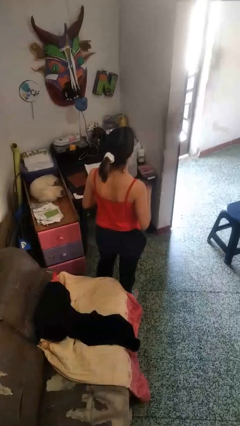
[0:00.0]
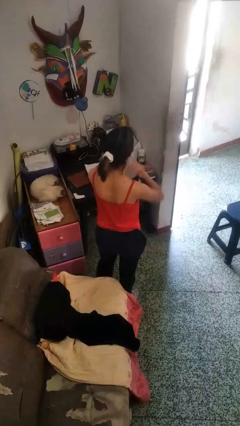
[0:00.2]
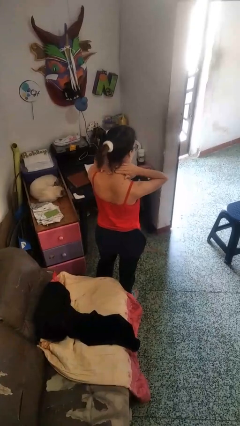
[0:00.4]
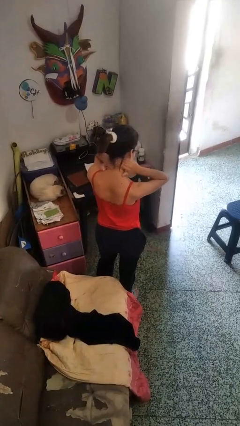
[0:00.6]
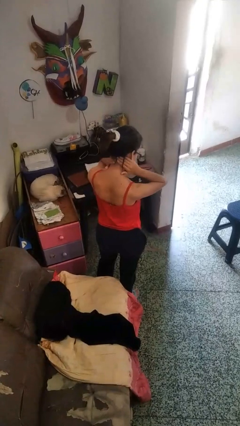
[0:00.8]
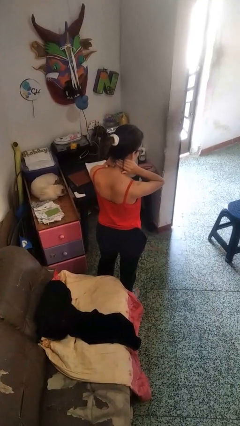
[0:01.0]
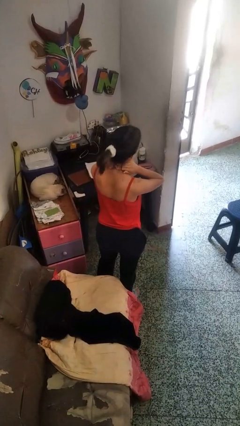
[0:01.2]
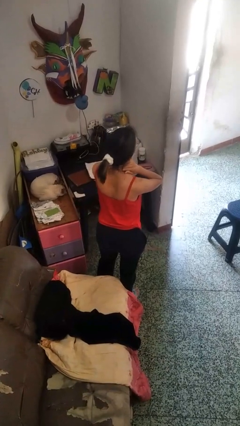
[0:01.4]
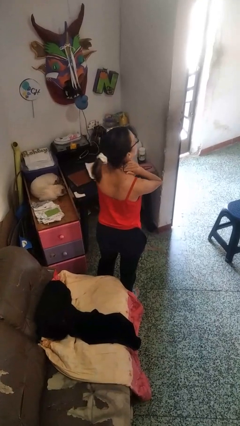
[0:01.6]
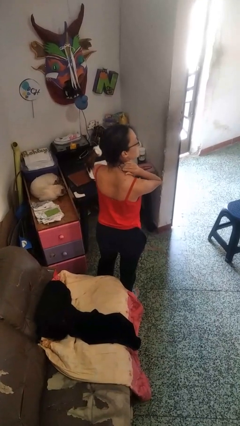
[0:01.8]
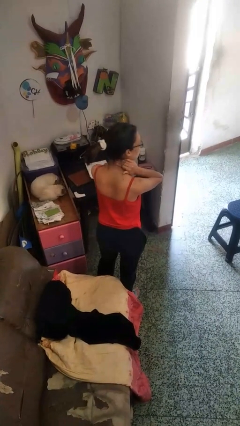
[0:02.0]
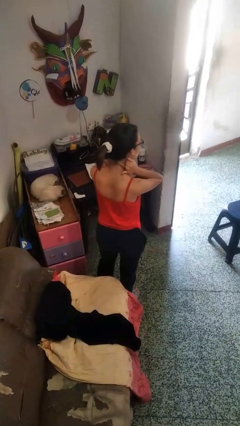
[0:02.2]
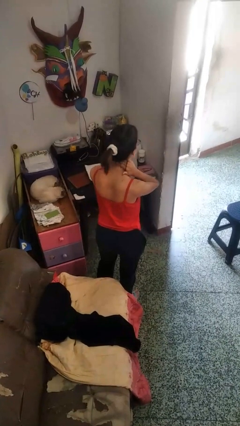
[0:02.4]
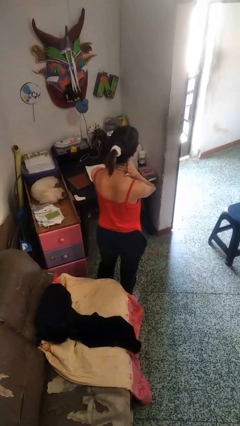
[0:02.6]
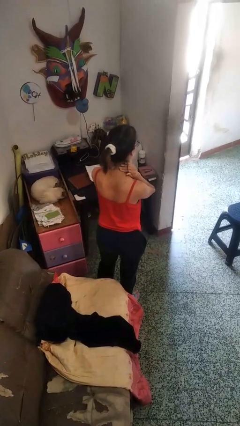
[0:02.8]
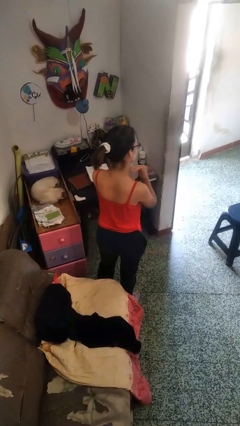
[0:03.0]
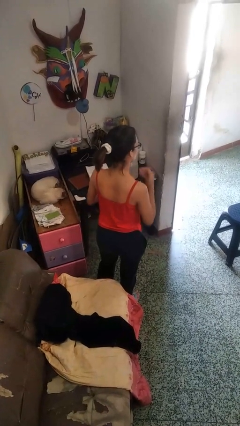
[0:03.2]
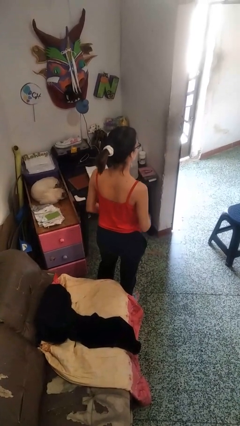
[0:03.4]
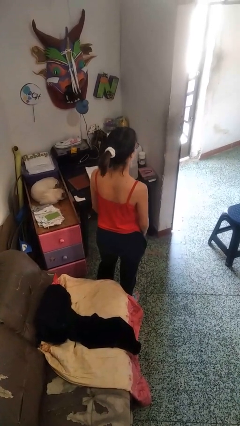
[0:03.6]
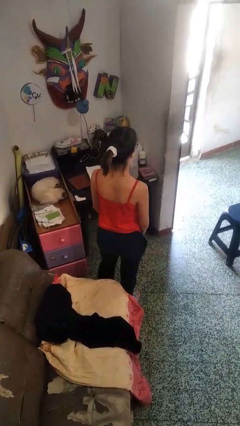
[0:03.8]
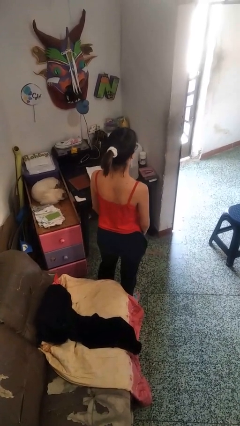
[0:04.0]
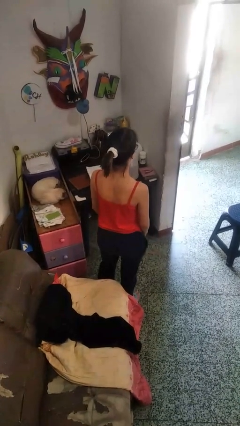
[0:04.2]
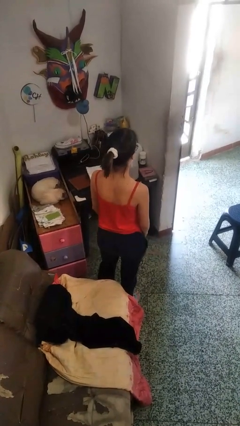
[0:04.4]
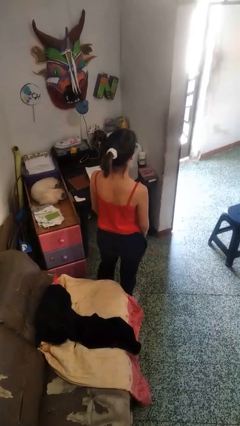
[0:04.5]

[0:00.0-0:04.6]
person rubs neck

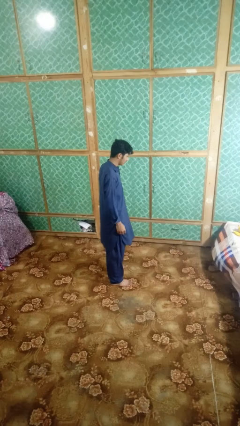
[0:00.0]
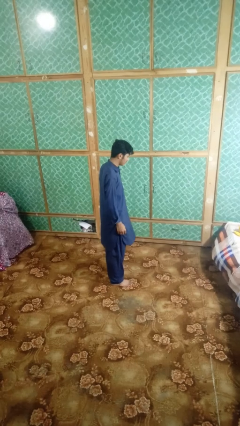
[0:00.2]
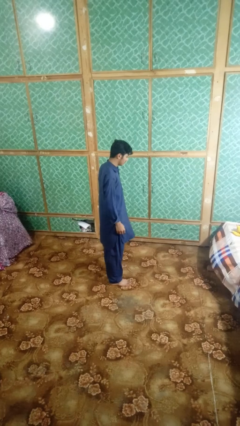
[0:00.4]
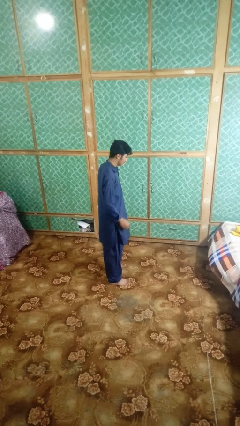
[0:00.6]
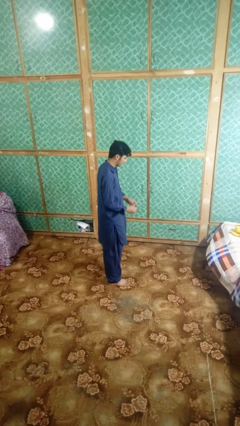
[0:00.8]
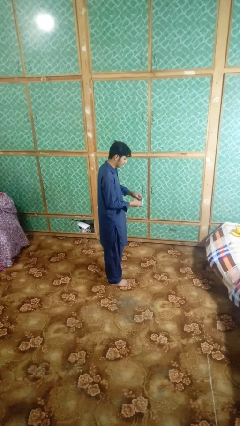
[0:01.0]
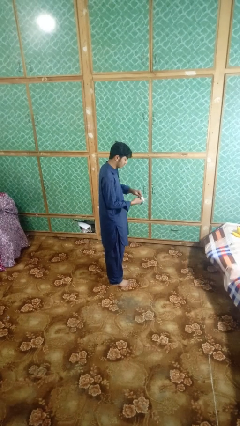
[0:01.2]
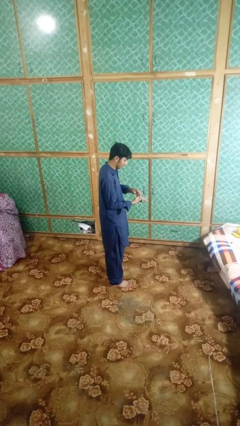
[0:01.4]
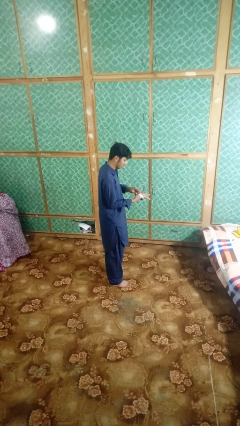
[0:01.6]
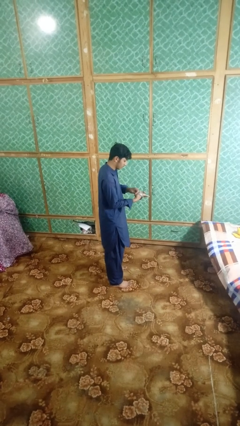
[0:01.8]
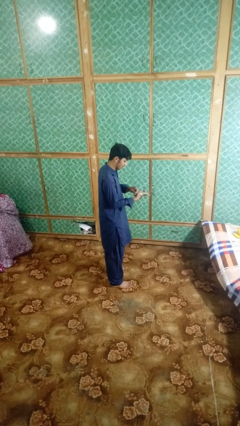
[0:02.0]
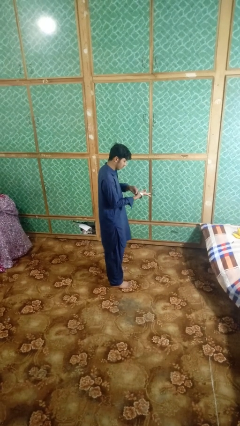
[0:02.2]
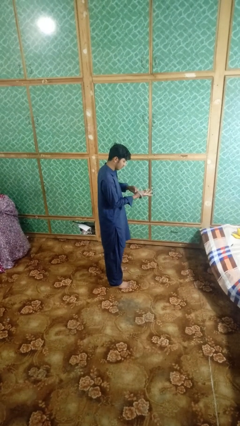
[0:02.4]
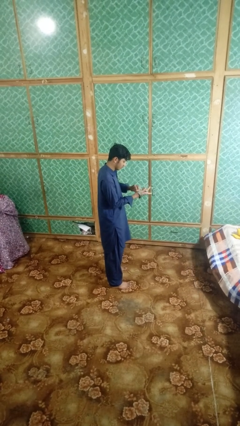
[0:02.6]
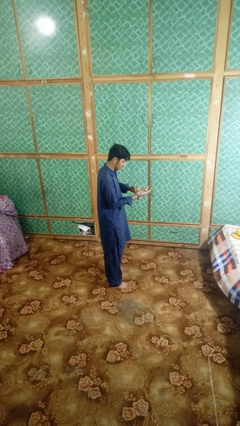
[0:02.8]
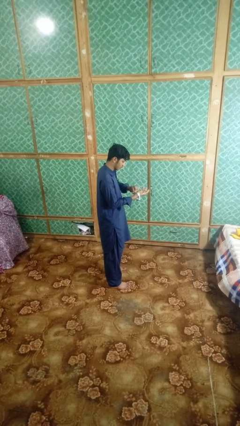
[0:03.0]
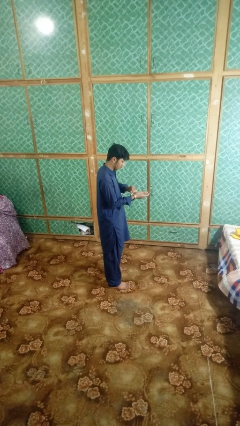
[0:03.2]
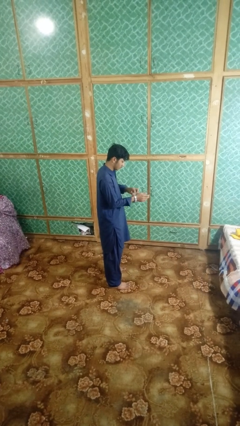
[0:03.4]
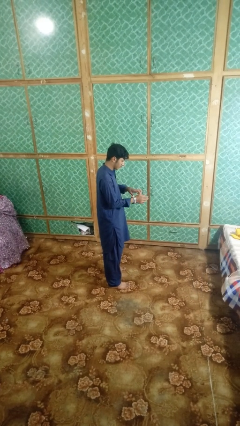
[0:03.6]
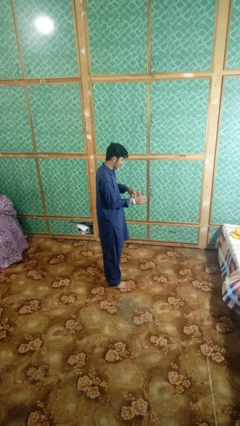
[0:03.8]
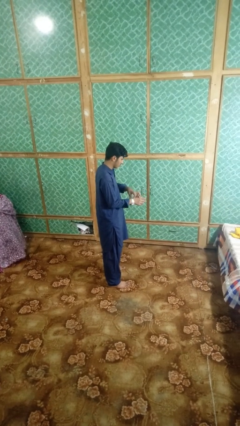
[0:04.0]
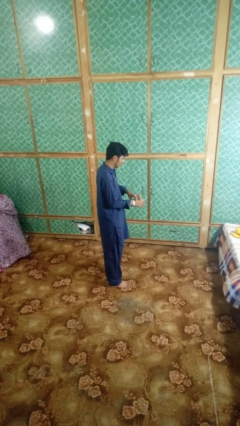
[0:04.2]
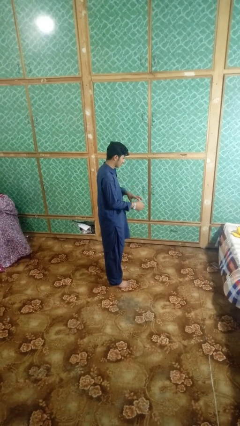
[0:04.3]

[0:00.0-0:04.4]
person puts on wristwatch

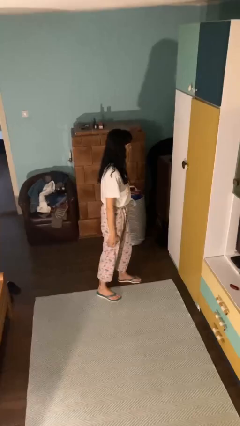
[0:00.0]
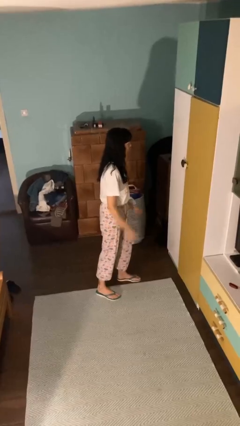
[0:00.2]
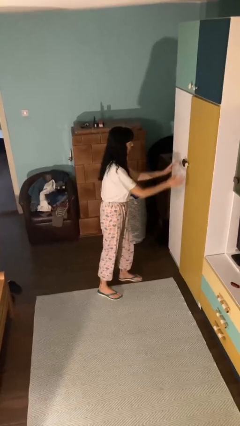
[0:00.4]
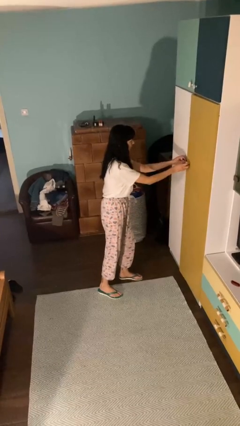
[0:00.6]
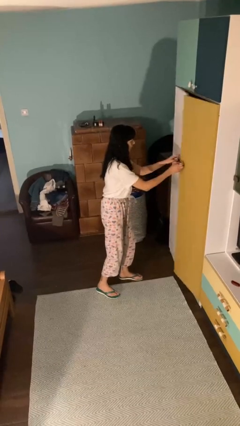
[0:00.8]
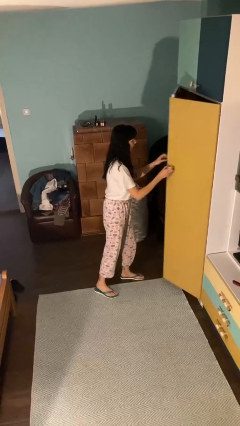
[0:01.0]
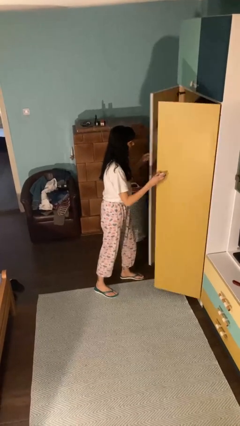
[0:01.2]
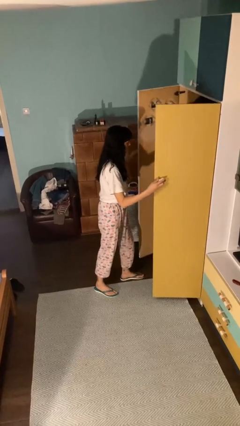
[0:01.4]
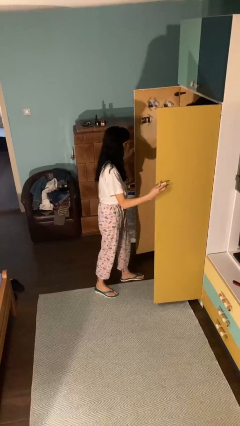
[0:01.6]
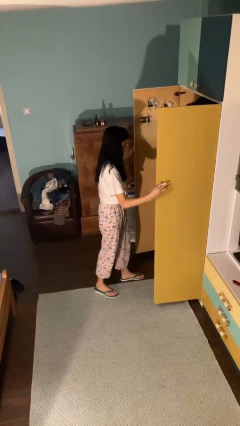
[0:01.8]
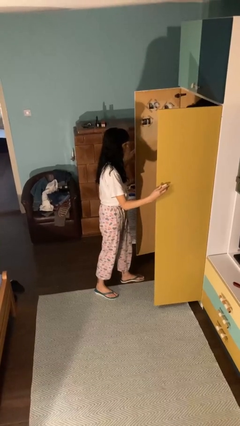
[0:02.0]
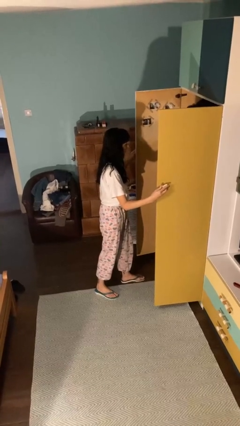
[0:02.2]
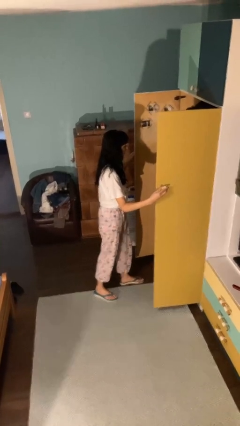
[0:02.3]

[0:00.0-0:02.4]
person opens closet door

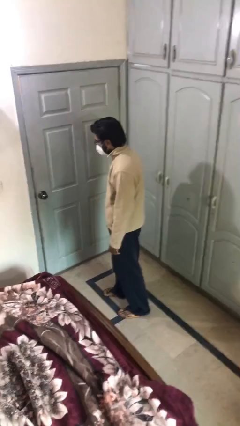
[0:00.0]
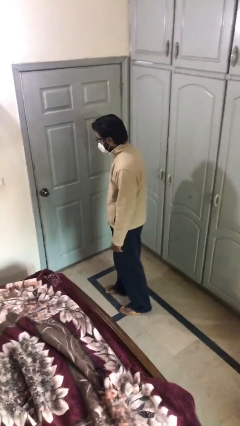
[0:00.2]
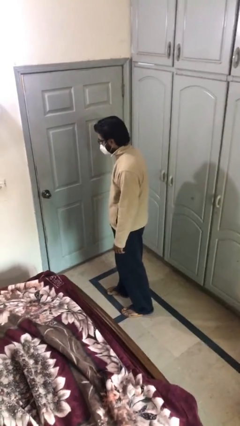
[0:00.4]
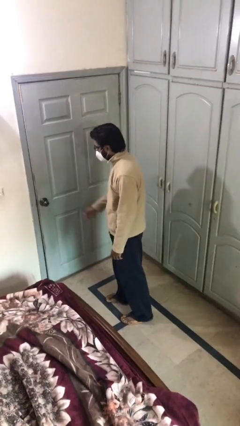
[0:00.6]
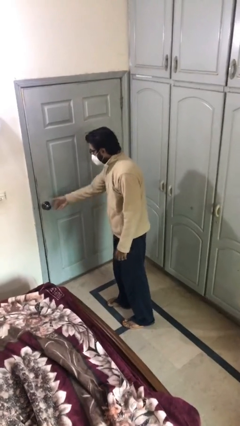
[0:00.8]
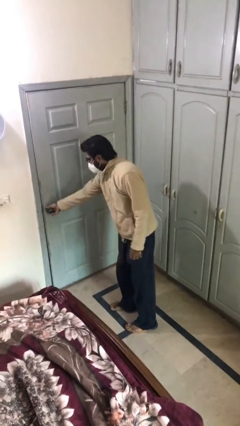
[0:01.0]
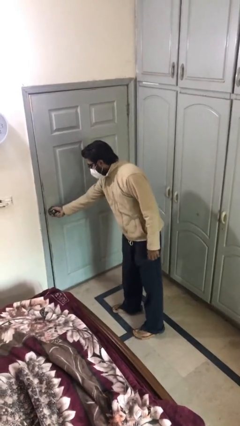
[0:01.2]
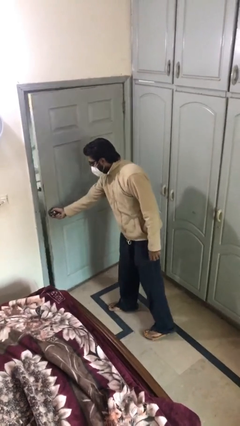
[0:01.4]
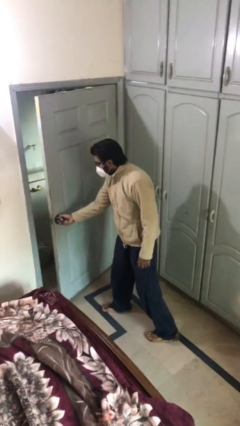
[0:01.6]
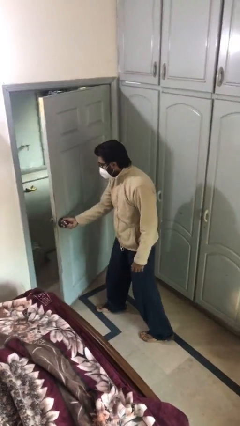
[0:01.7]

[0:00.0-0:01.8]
person opens facility door

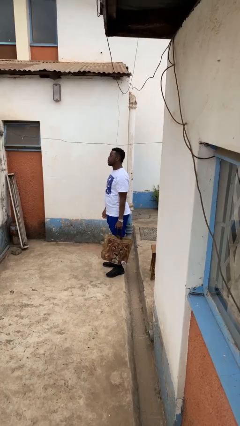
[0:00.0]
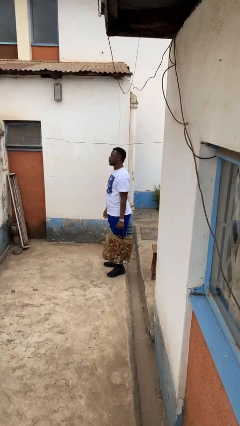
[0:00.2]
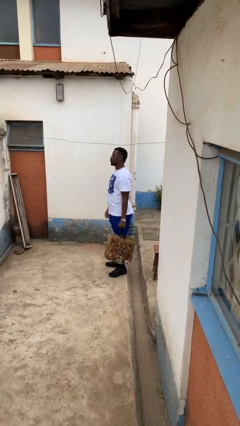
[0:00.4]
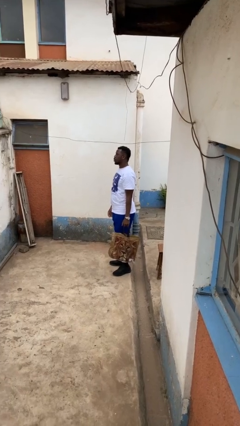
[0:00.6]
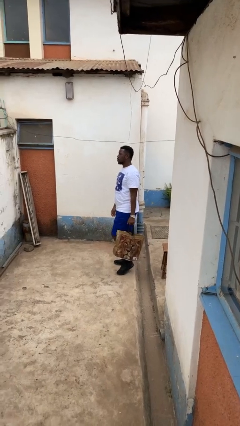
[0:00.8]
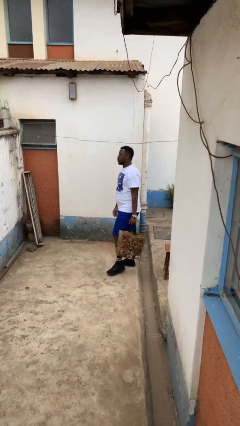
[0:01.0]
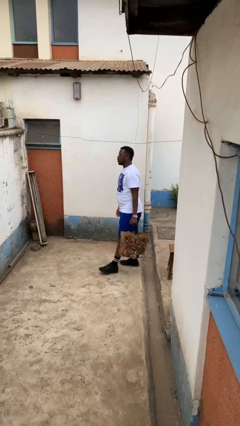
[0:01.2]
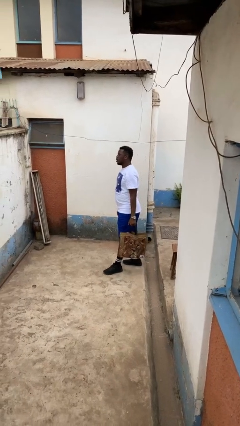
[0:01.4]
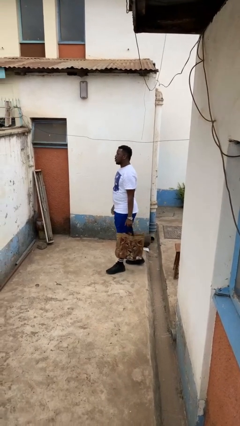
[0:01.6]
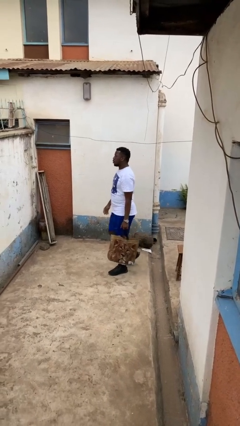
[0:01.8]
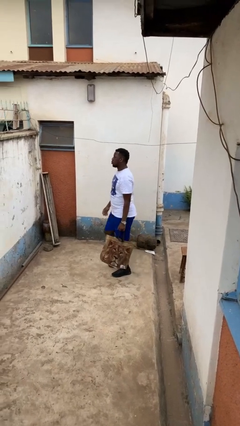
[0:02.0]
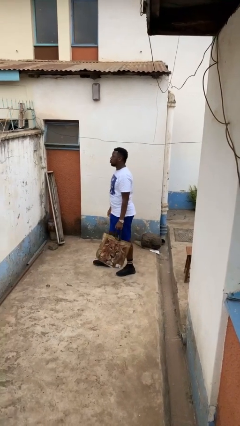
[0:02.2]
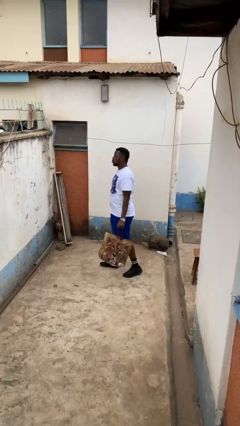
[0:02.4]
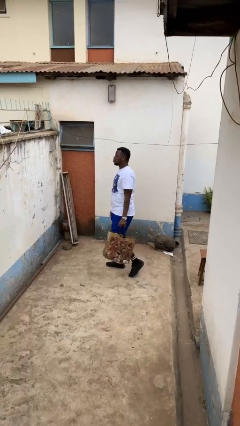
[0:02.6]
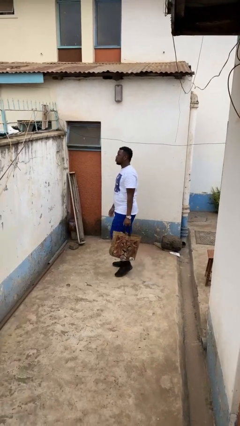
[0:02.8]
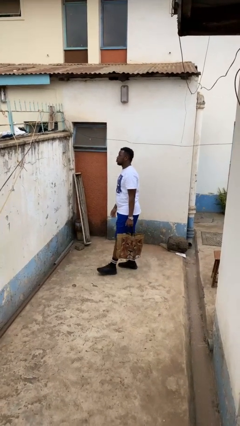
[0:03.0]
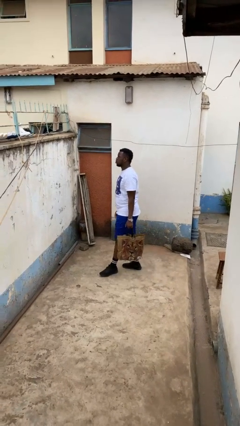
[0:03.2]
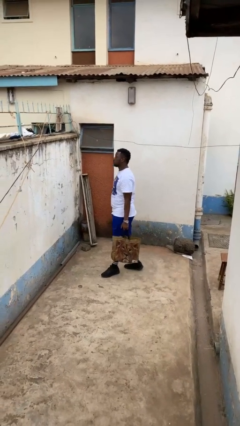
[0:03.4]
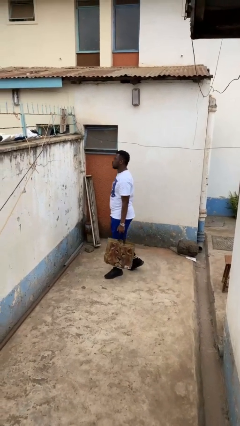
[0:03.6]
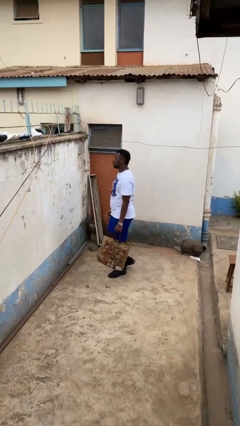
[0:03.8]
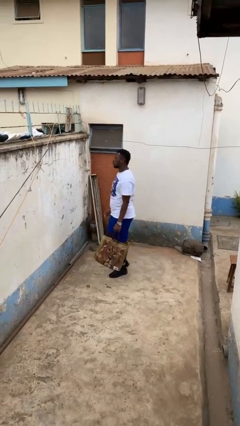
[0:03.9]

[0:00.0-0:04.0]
person carries groceries

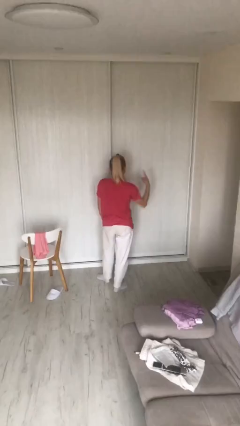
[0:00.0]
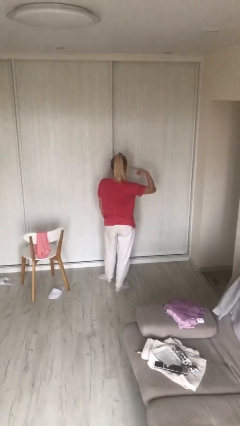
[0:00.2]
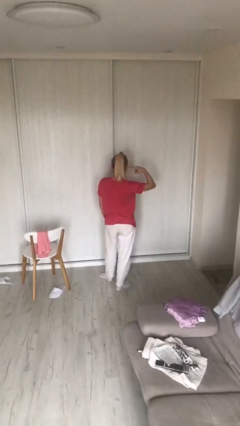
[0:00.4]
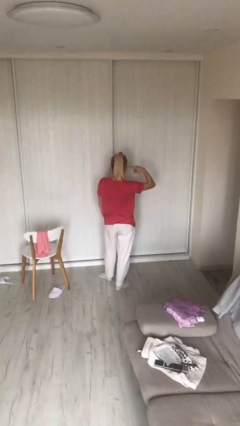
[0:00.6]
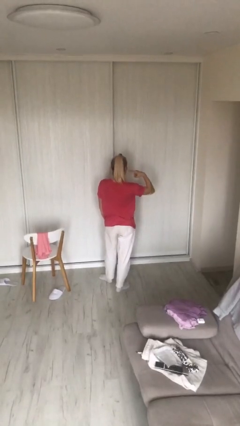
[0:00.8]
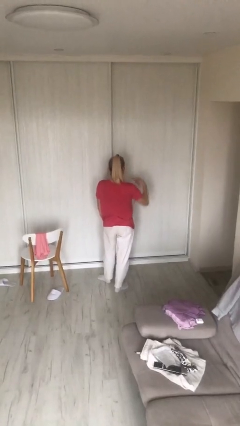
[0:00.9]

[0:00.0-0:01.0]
person gestures listen closely
